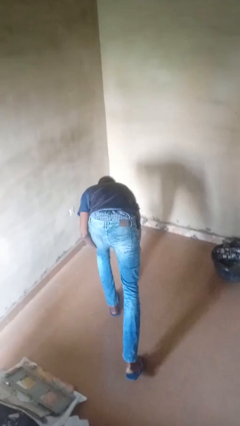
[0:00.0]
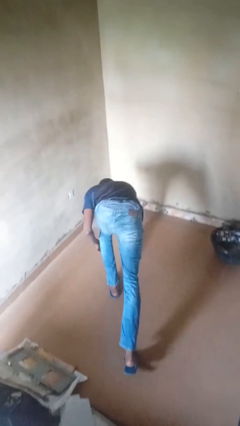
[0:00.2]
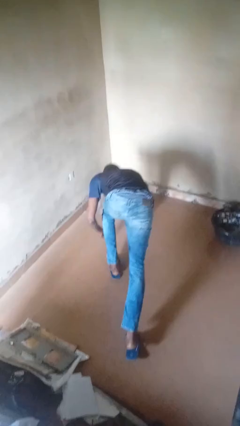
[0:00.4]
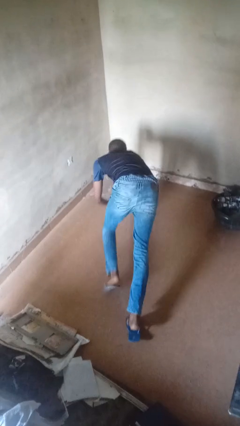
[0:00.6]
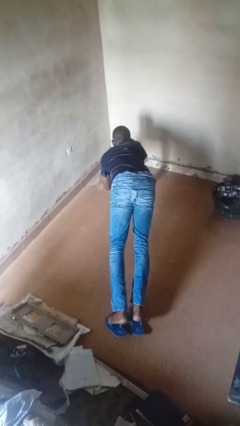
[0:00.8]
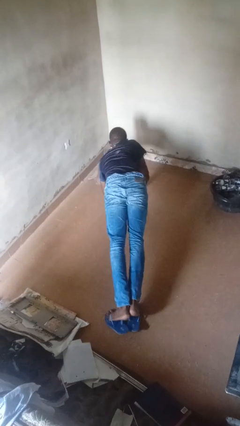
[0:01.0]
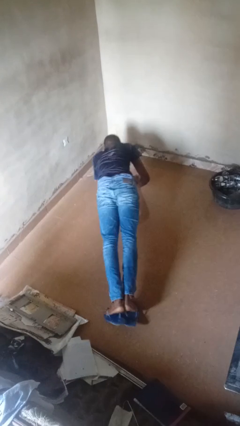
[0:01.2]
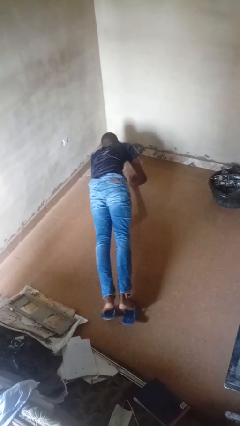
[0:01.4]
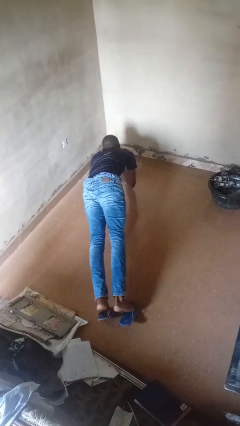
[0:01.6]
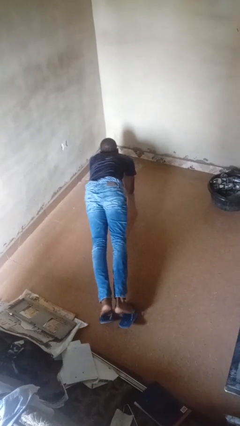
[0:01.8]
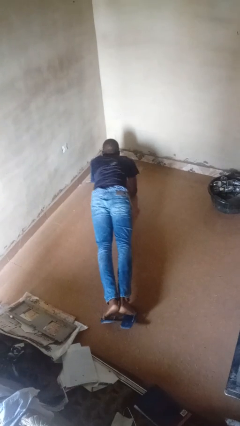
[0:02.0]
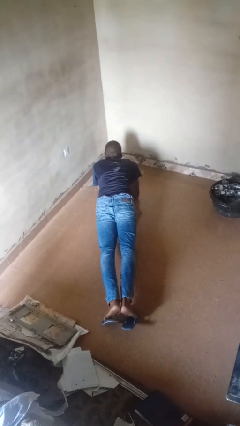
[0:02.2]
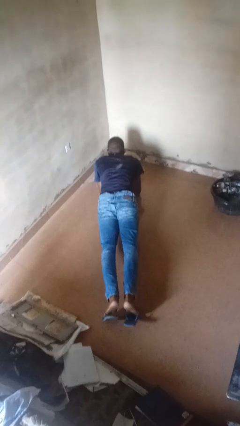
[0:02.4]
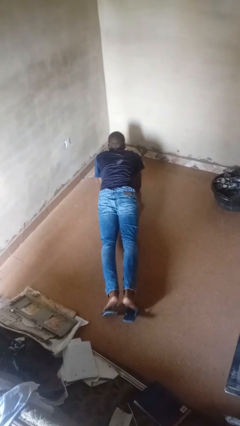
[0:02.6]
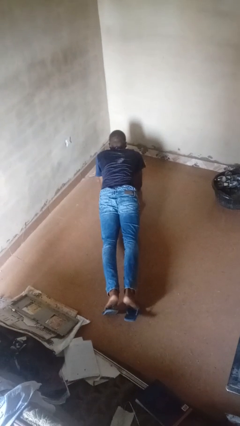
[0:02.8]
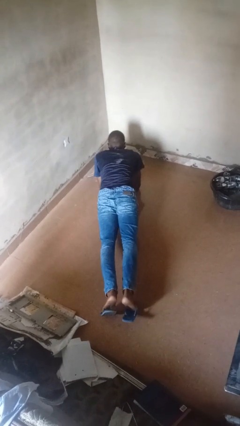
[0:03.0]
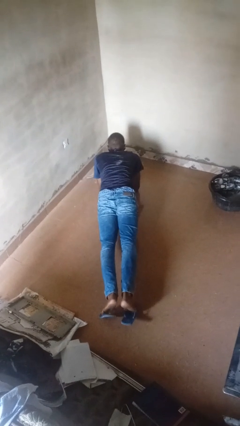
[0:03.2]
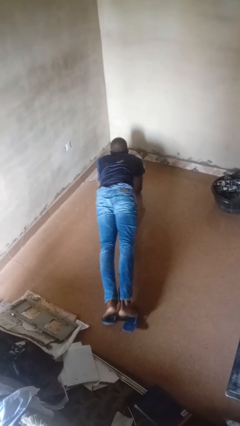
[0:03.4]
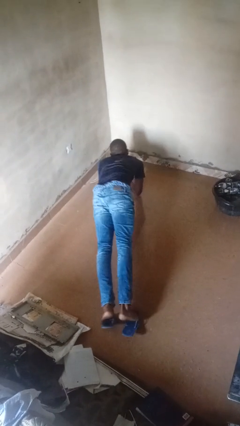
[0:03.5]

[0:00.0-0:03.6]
person exercises with plank

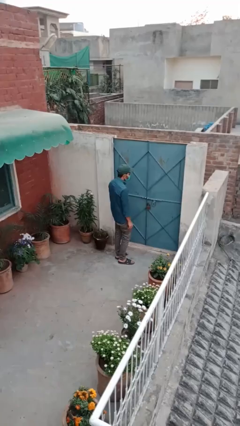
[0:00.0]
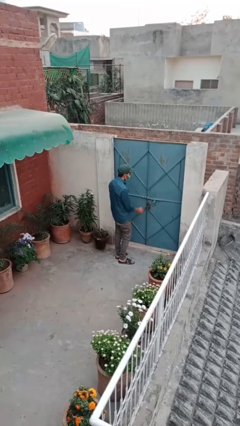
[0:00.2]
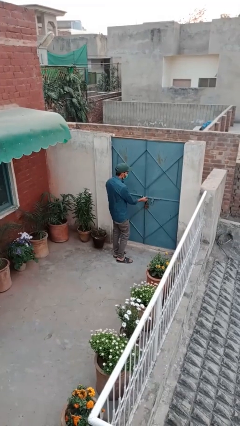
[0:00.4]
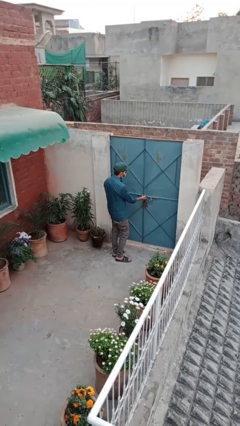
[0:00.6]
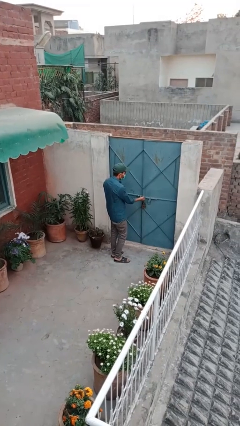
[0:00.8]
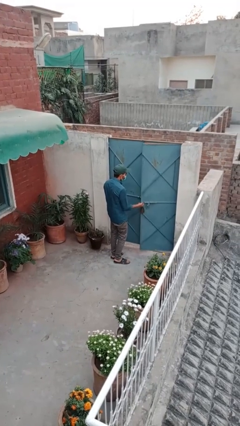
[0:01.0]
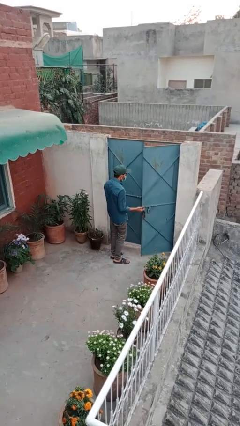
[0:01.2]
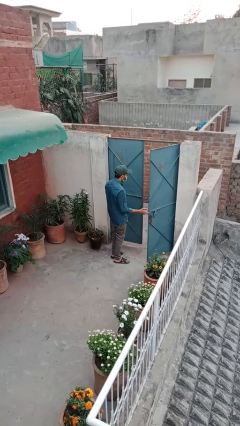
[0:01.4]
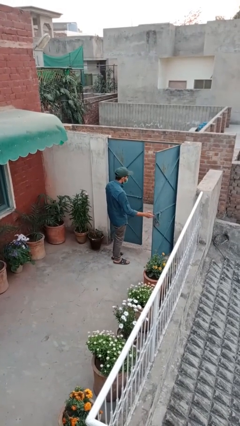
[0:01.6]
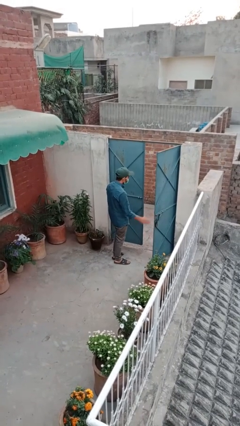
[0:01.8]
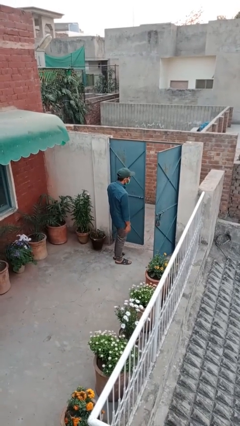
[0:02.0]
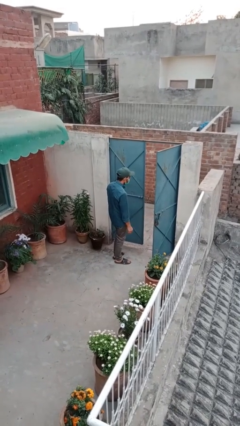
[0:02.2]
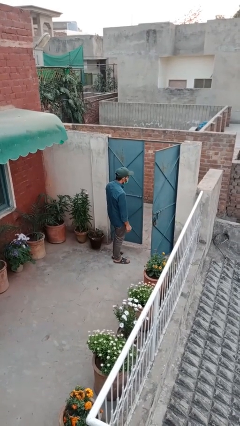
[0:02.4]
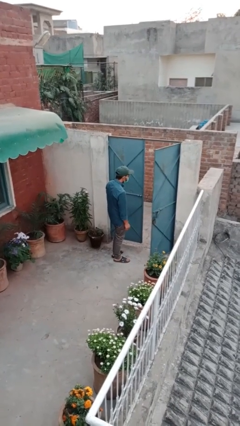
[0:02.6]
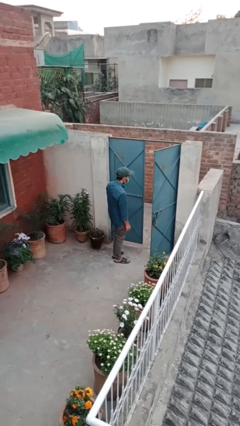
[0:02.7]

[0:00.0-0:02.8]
person opens facility door

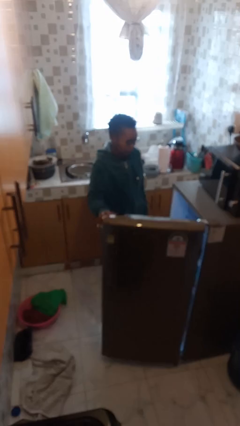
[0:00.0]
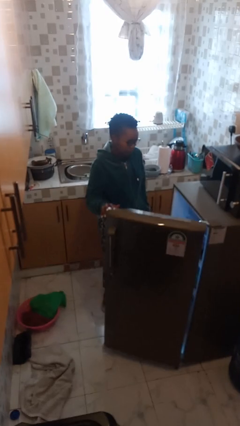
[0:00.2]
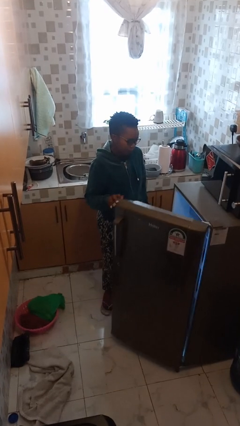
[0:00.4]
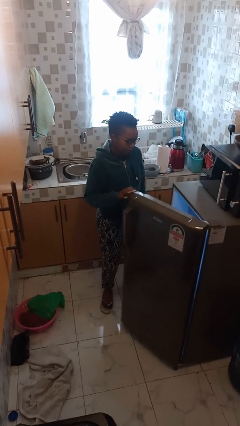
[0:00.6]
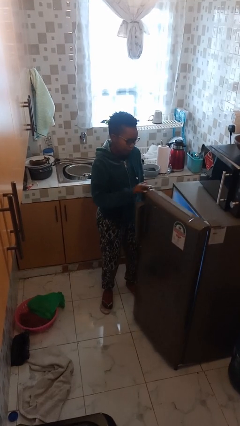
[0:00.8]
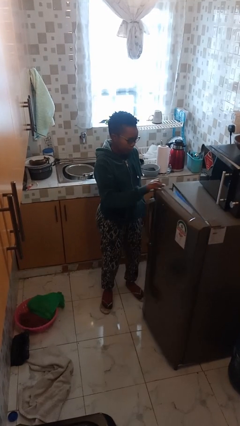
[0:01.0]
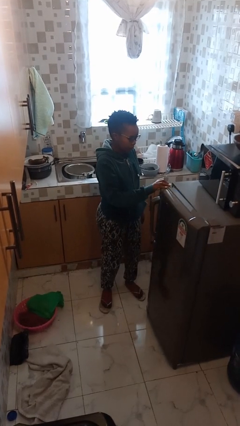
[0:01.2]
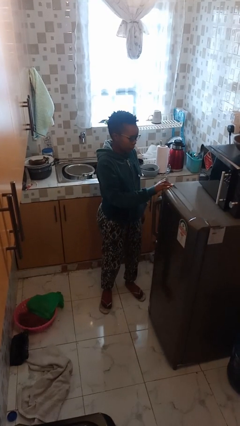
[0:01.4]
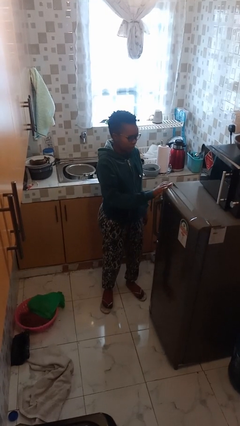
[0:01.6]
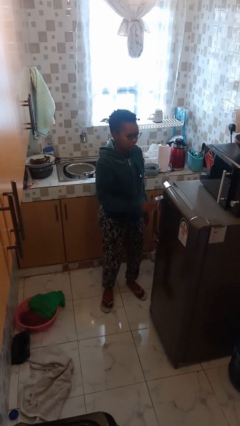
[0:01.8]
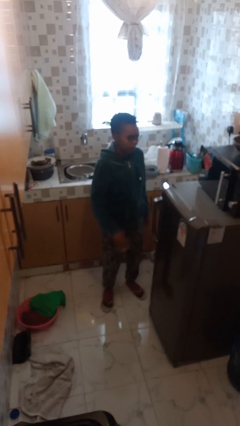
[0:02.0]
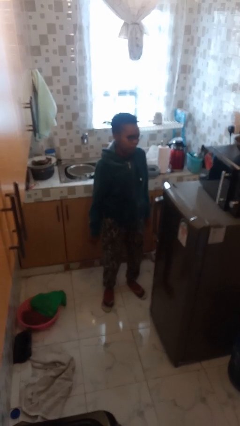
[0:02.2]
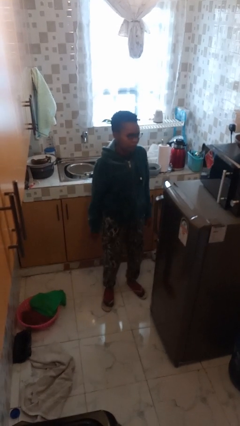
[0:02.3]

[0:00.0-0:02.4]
person closes refrigerator

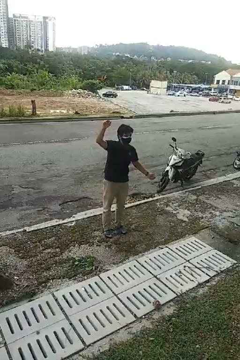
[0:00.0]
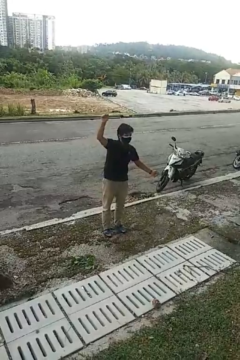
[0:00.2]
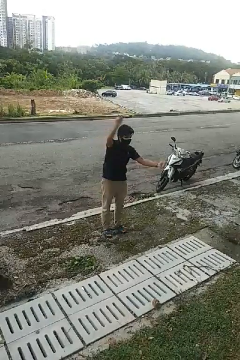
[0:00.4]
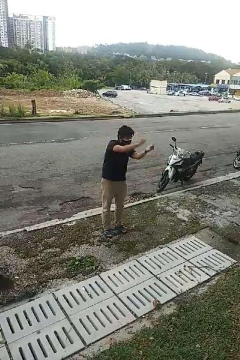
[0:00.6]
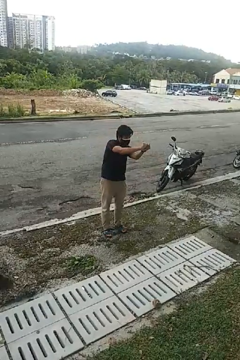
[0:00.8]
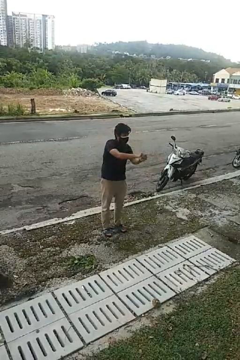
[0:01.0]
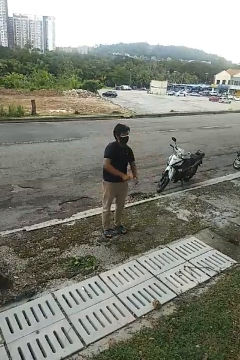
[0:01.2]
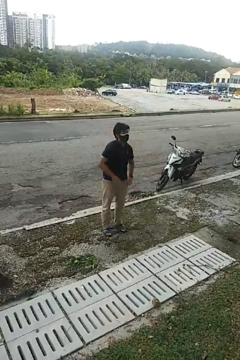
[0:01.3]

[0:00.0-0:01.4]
person gestures zoom out

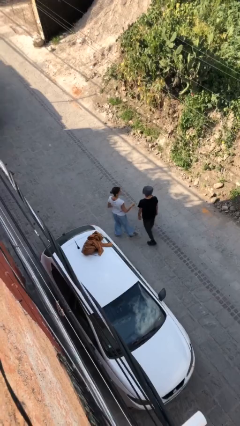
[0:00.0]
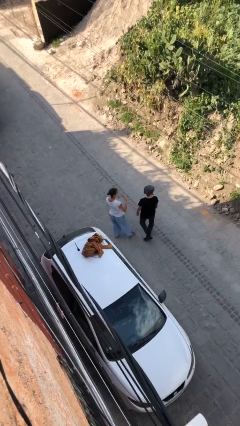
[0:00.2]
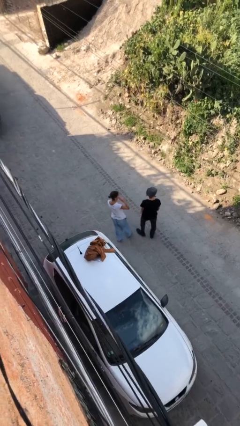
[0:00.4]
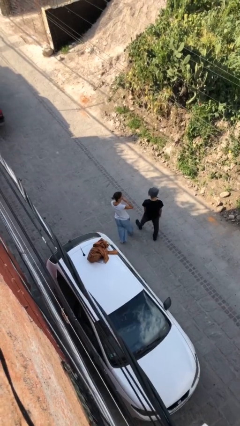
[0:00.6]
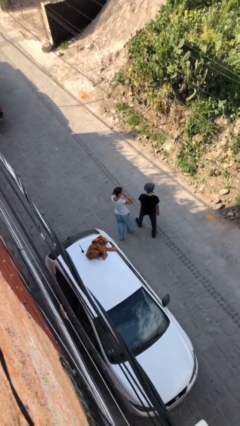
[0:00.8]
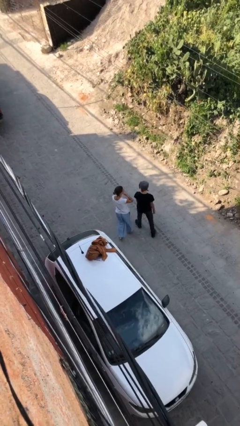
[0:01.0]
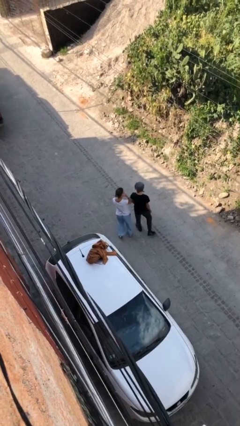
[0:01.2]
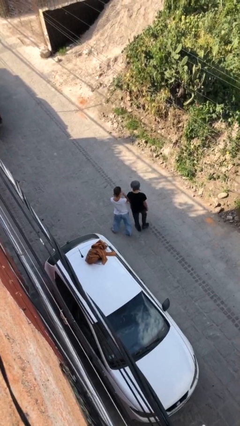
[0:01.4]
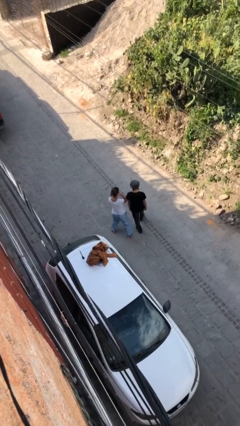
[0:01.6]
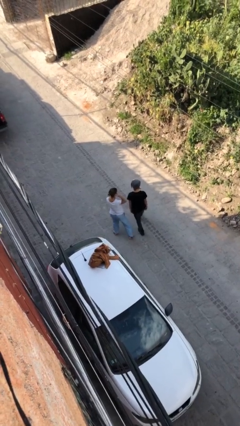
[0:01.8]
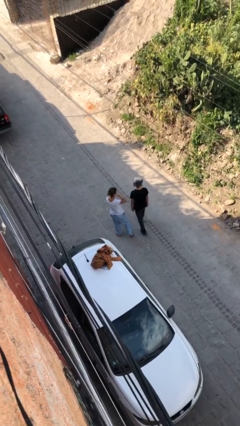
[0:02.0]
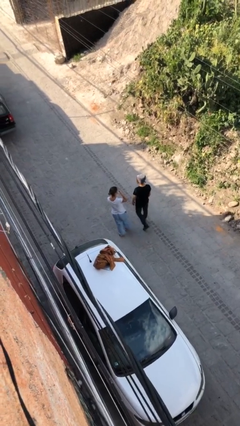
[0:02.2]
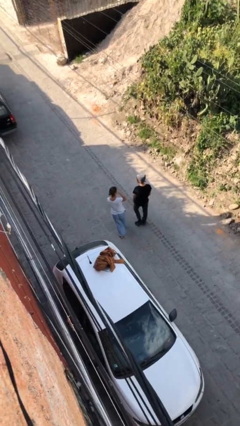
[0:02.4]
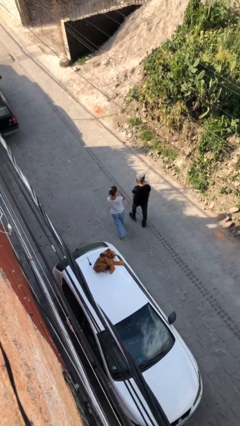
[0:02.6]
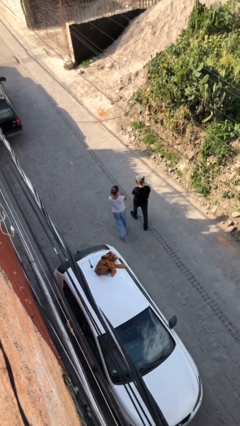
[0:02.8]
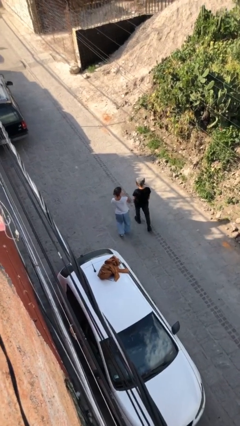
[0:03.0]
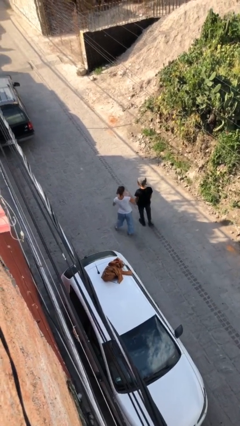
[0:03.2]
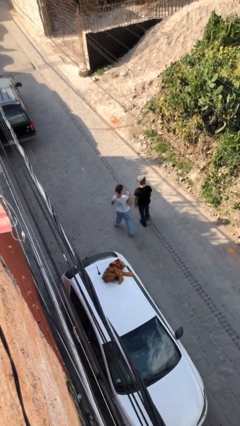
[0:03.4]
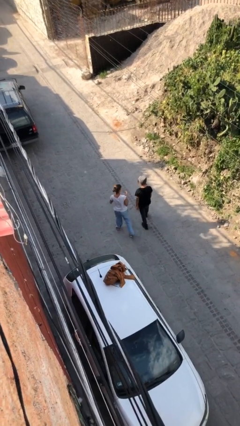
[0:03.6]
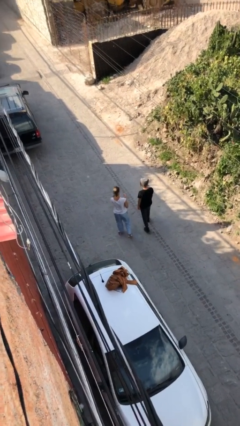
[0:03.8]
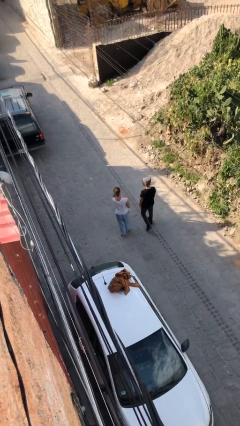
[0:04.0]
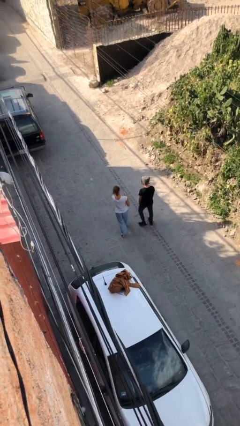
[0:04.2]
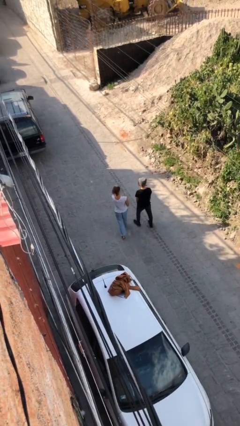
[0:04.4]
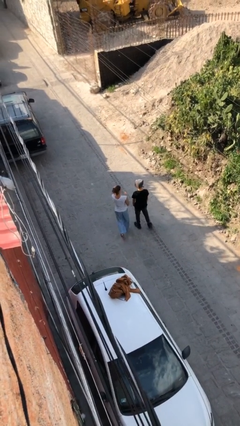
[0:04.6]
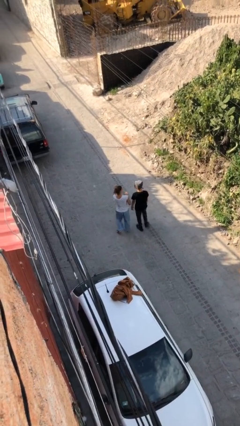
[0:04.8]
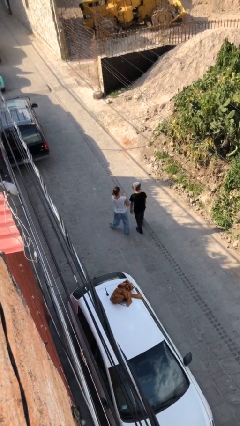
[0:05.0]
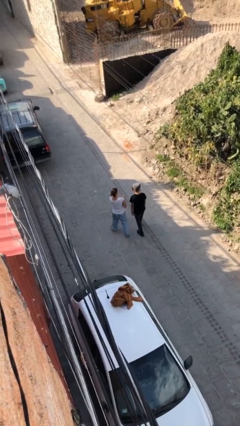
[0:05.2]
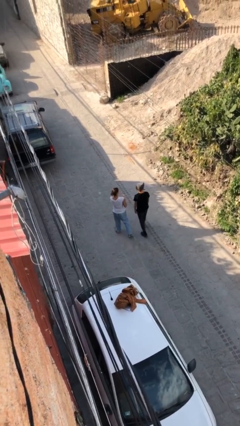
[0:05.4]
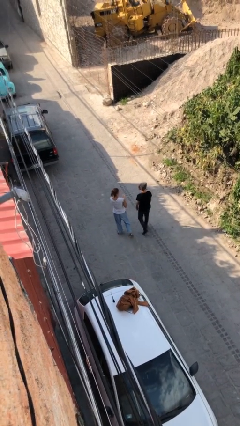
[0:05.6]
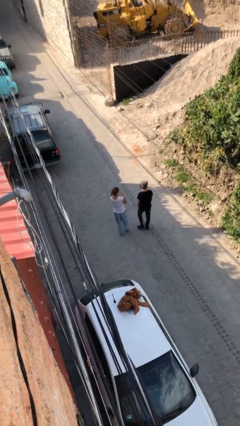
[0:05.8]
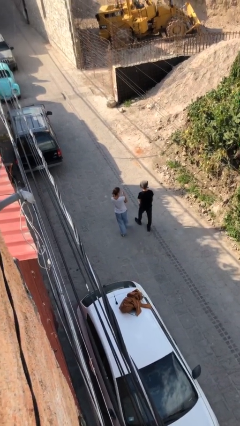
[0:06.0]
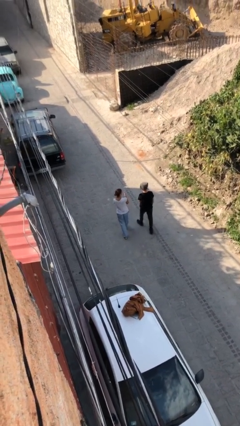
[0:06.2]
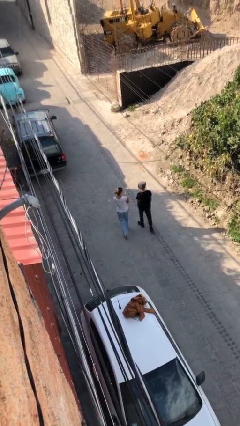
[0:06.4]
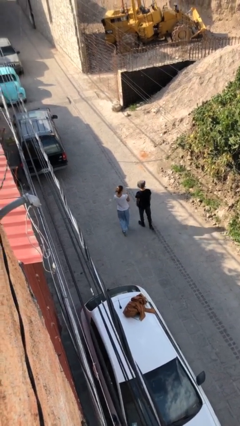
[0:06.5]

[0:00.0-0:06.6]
person talks to person

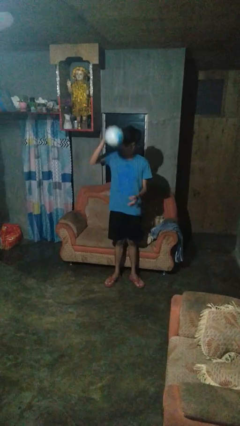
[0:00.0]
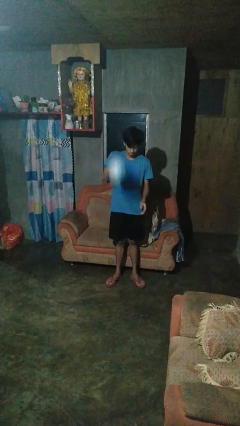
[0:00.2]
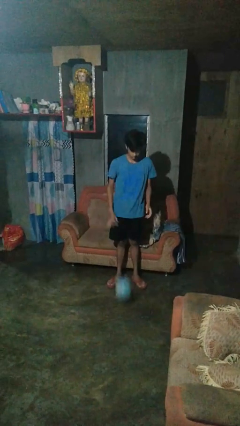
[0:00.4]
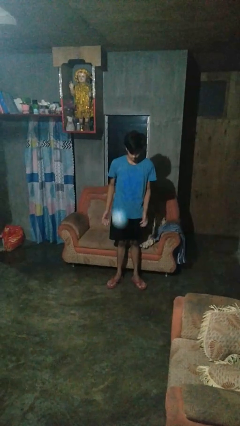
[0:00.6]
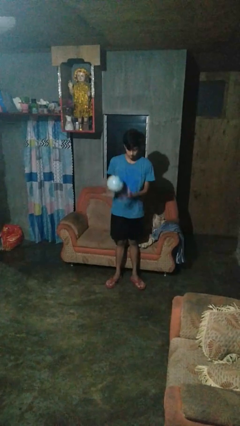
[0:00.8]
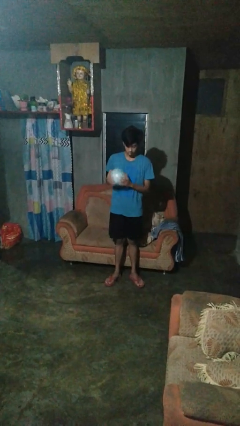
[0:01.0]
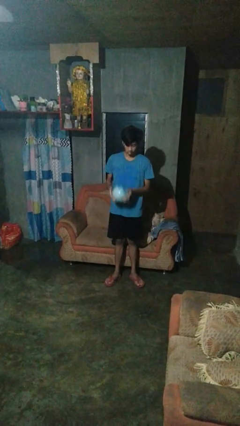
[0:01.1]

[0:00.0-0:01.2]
person bounces ball on floor
